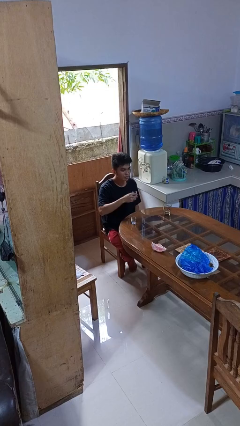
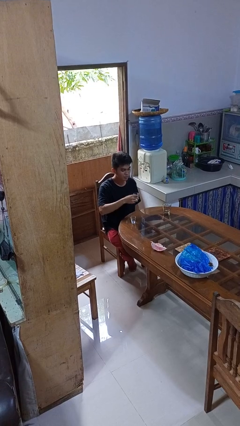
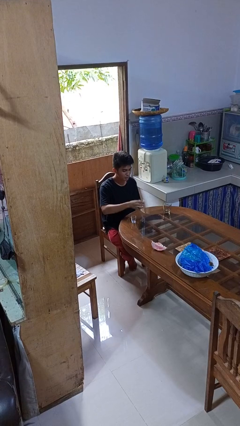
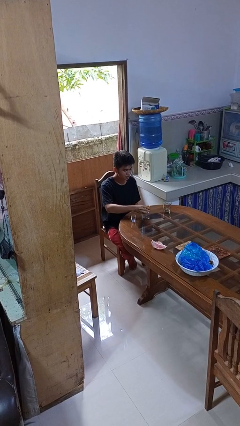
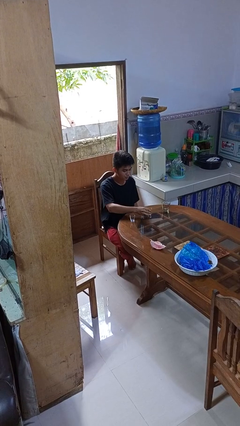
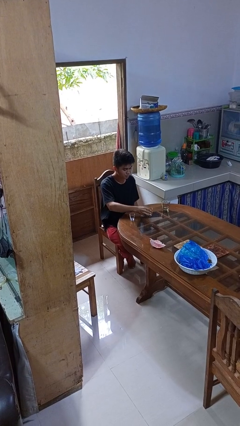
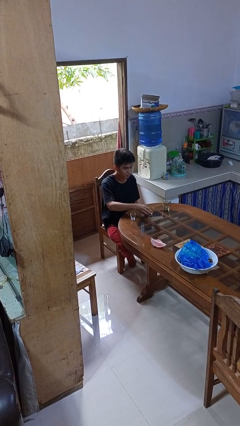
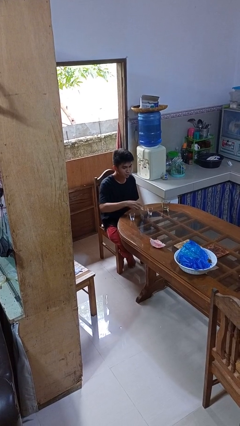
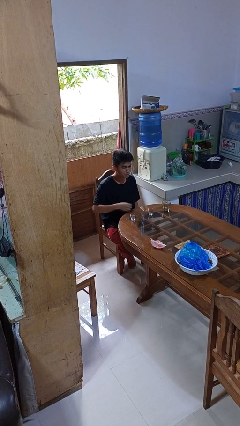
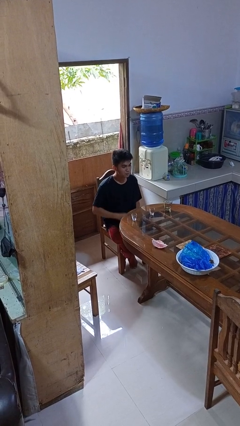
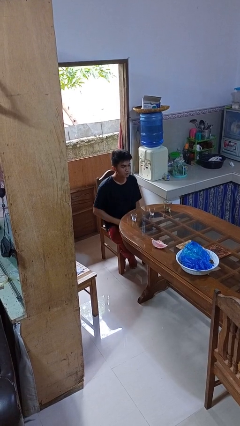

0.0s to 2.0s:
person puts down object on table

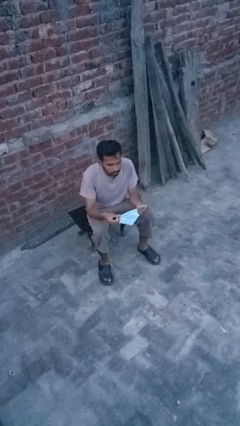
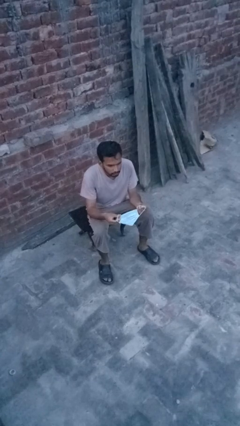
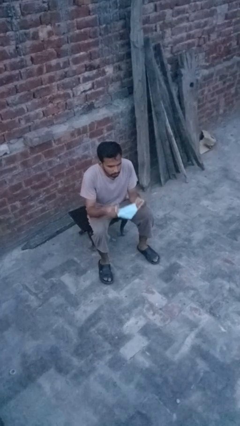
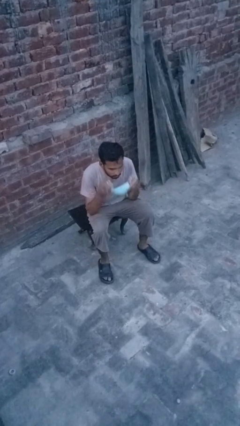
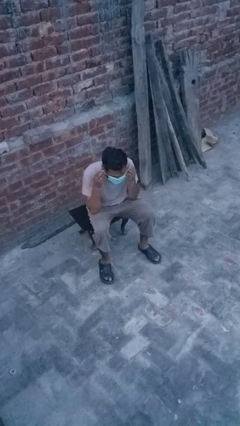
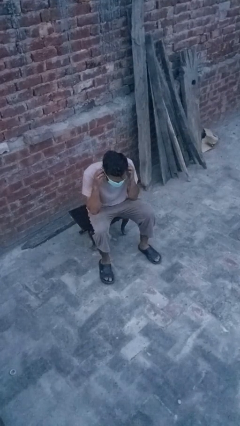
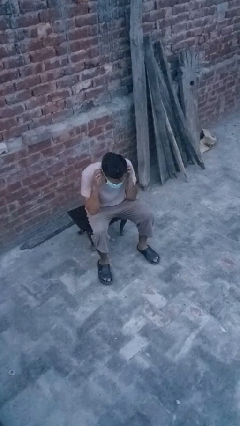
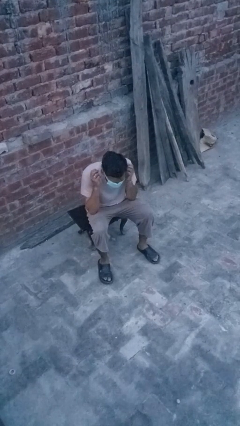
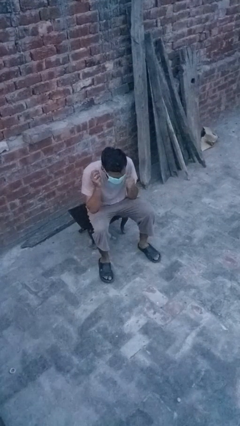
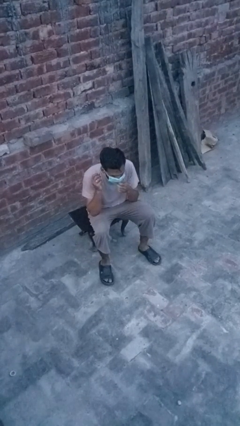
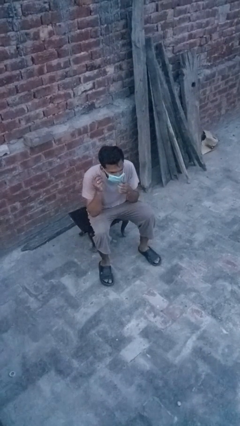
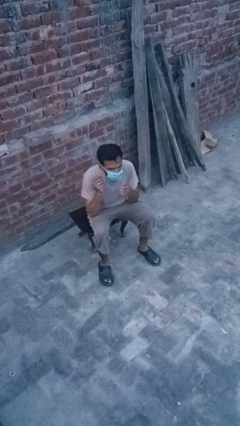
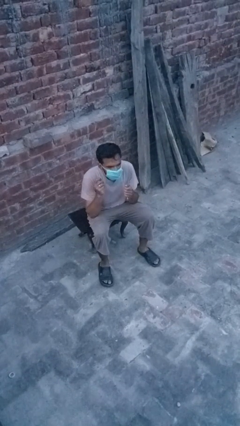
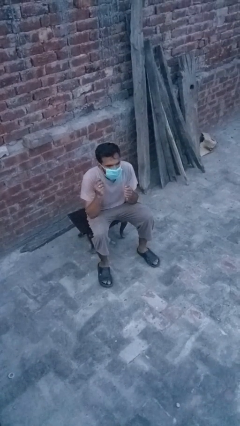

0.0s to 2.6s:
person puts on facemask

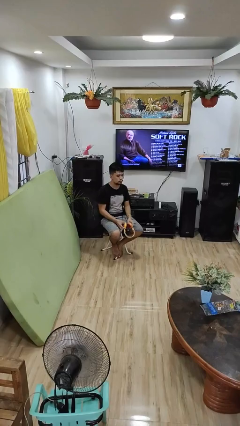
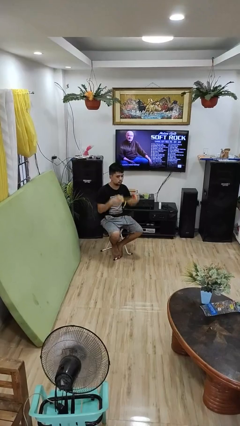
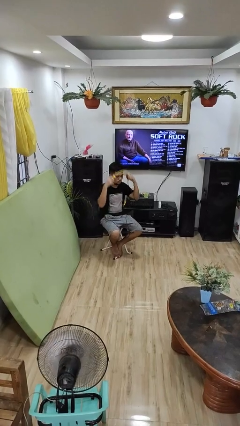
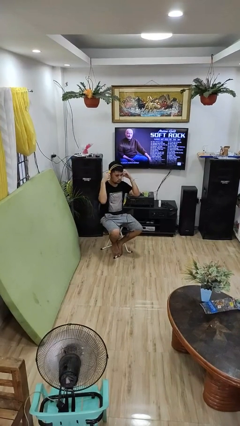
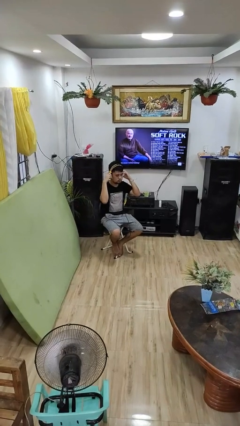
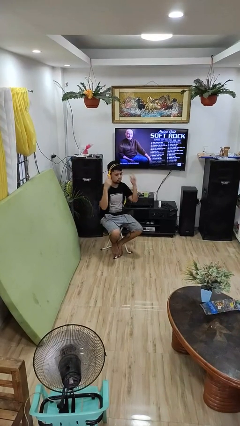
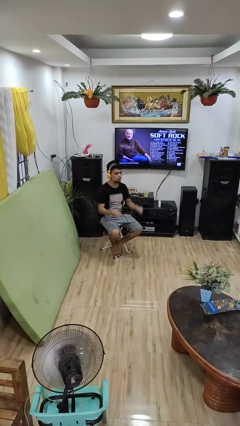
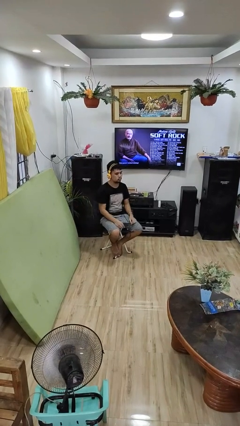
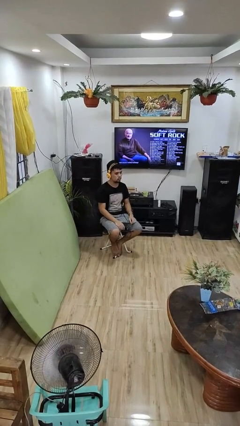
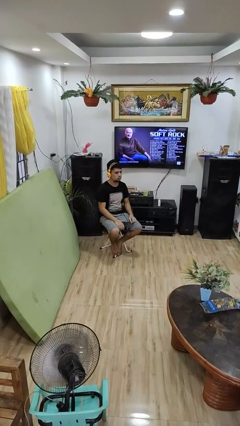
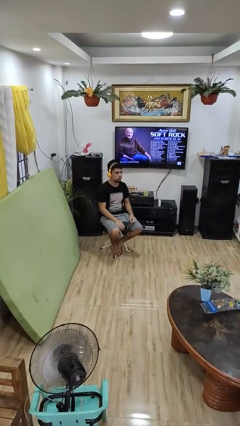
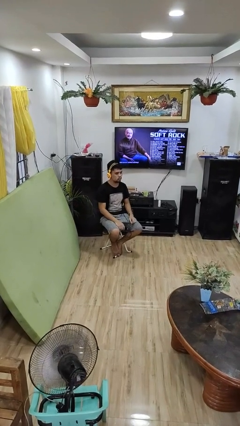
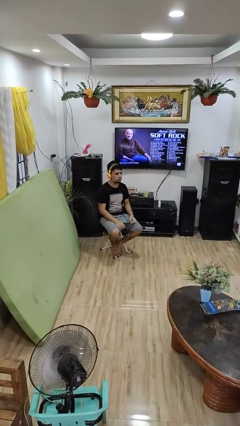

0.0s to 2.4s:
person puts on headphones

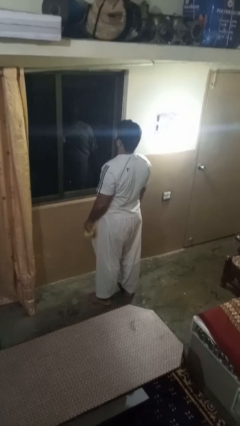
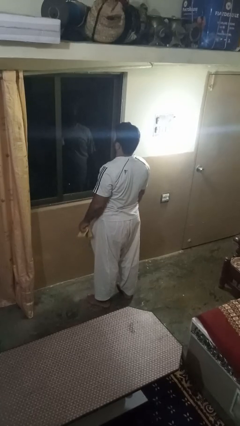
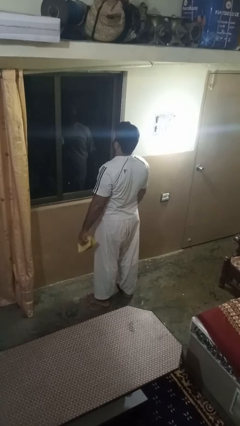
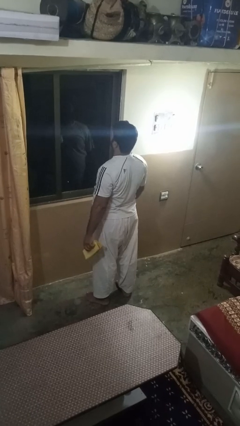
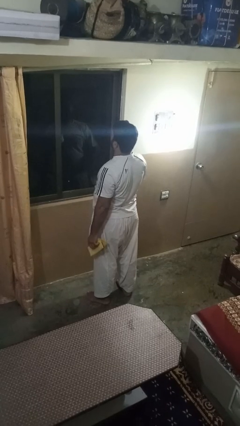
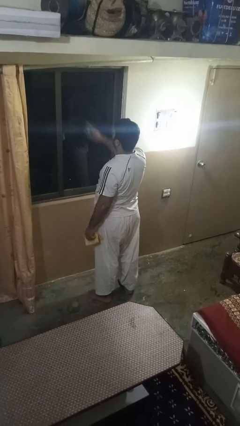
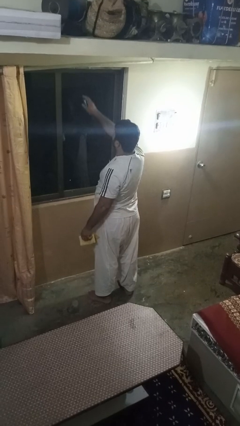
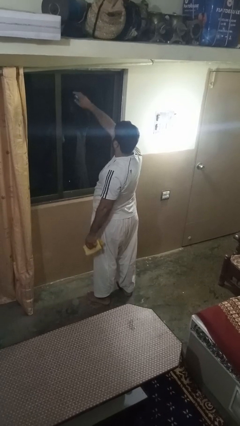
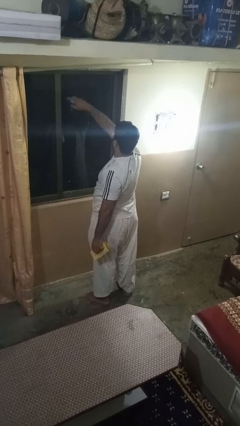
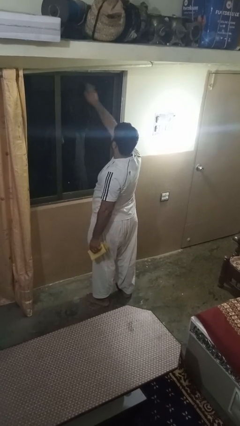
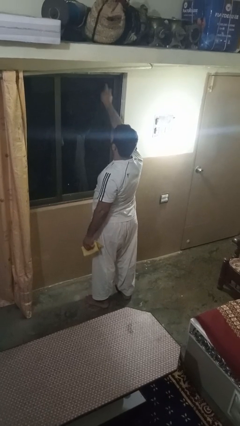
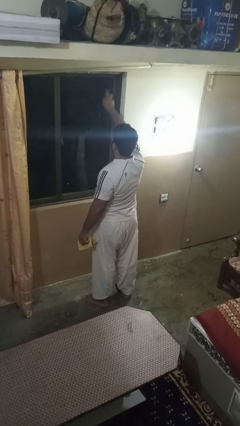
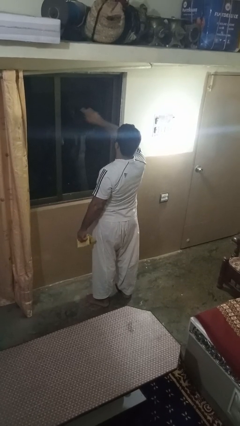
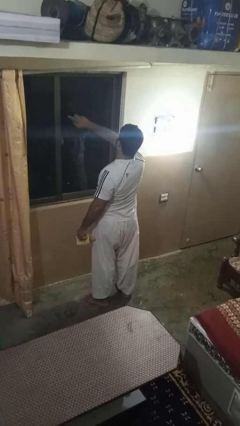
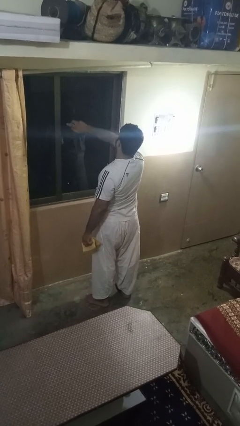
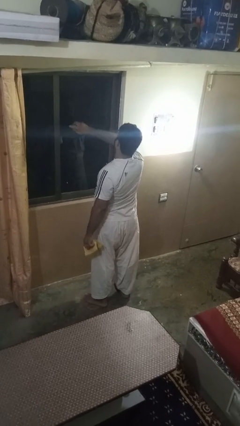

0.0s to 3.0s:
person sprays from bottle

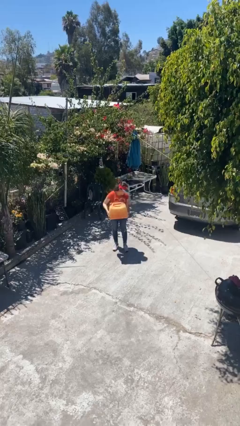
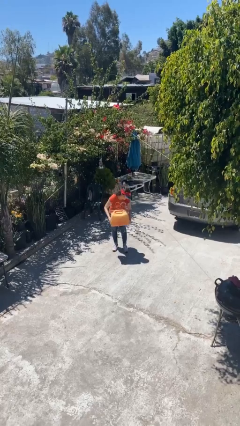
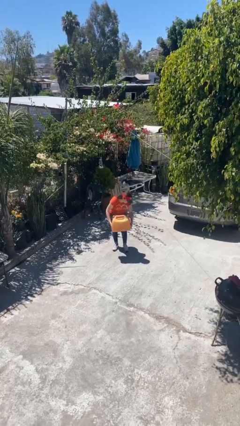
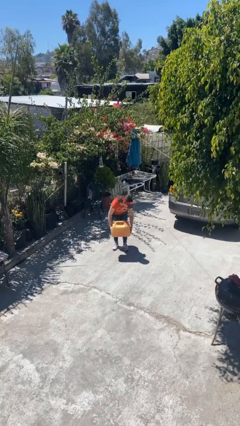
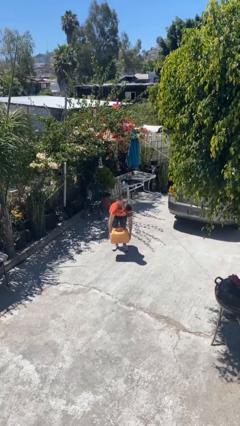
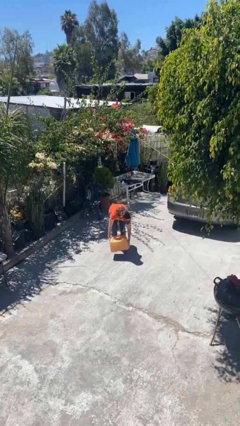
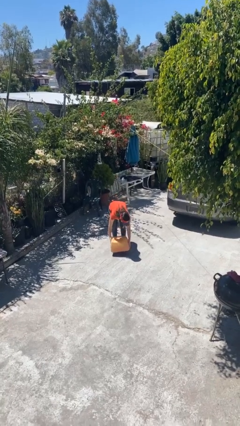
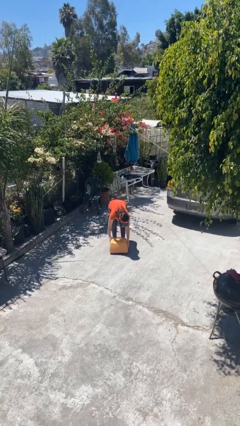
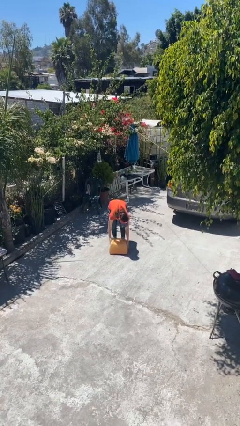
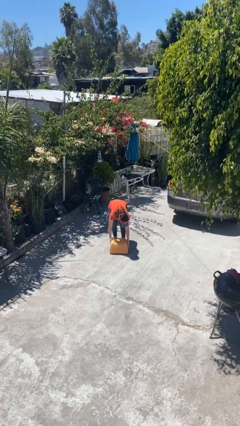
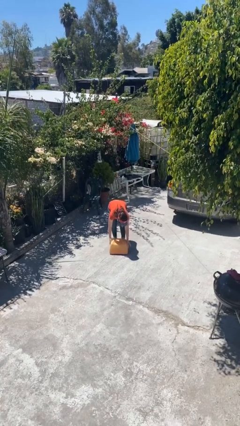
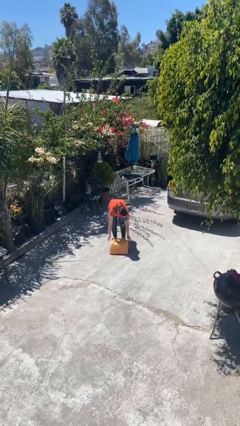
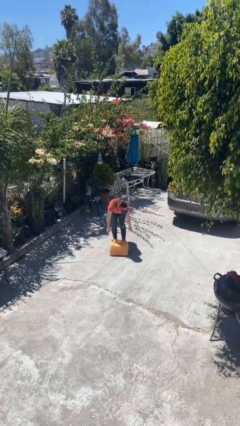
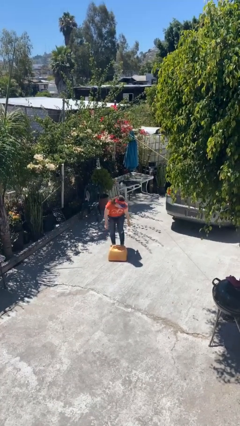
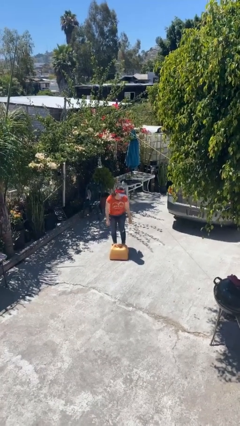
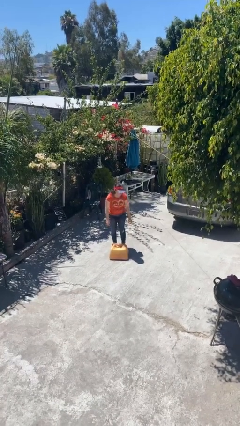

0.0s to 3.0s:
person puts down object on floor

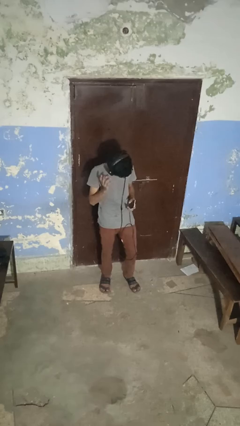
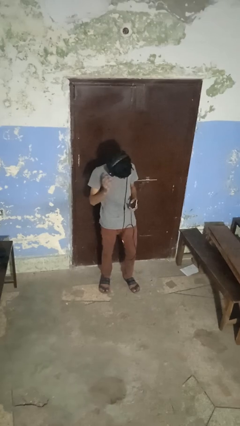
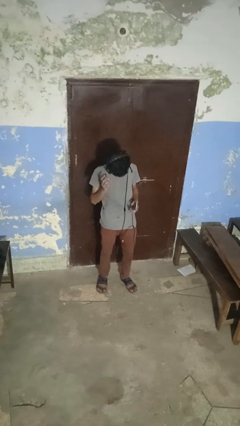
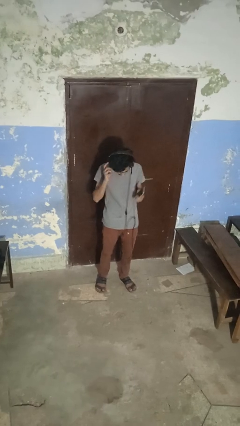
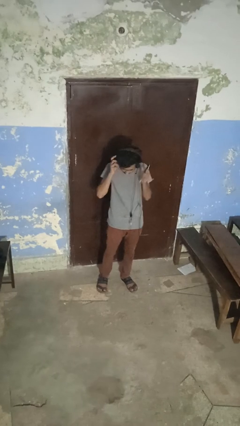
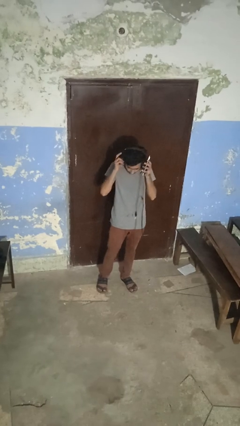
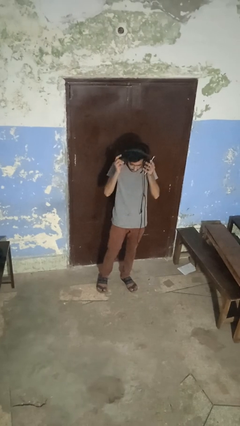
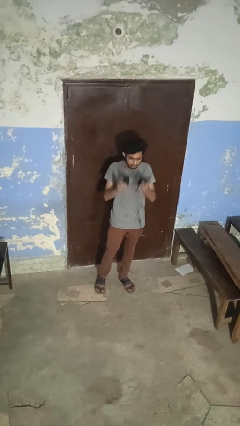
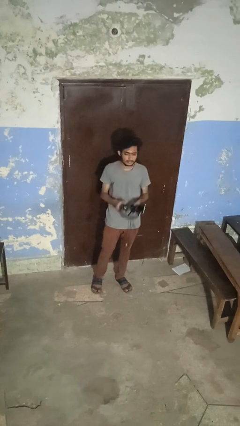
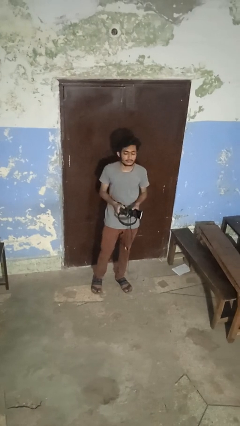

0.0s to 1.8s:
person takes off headphones

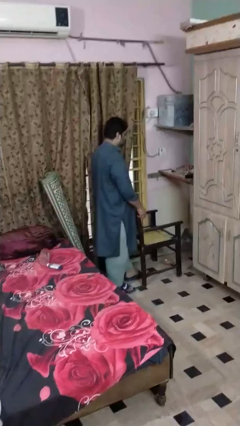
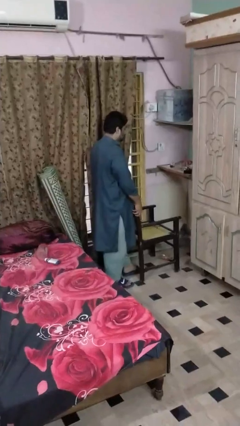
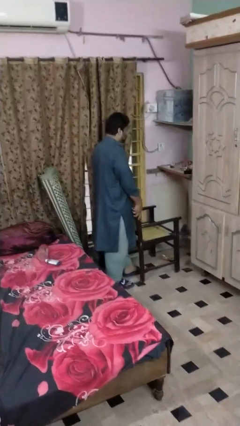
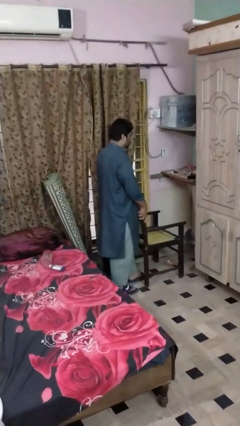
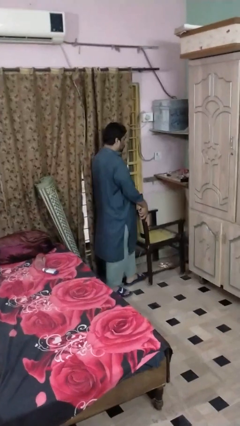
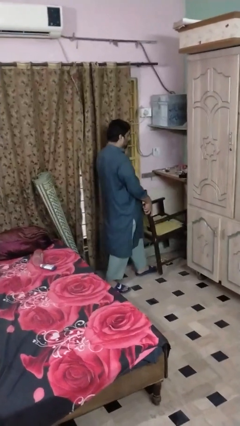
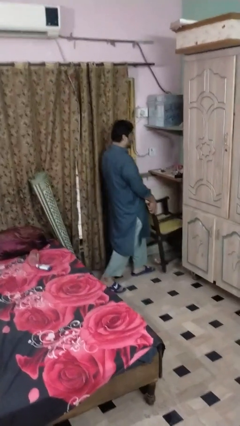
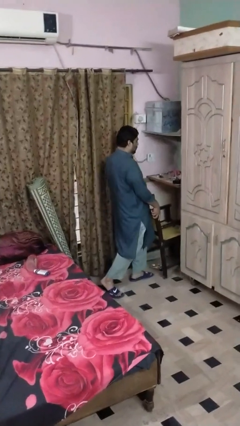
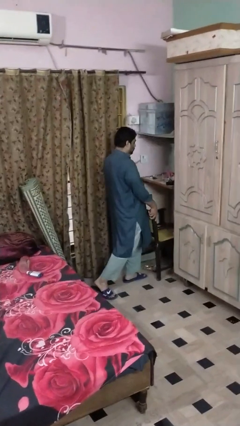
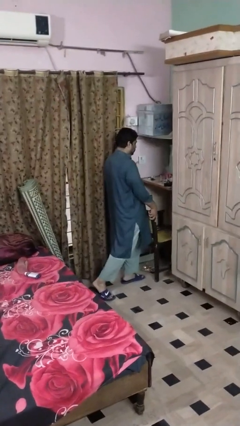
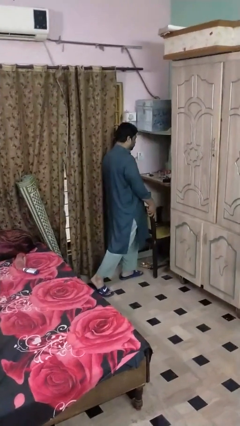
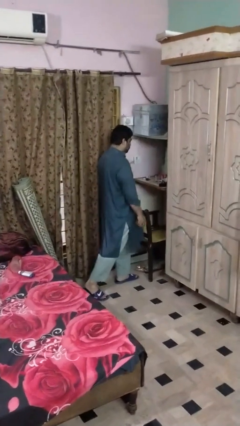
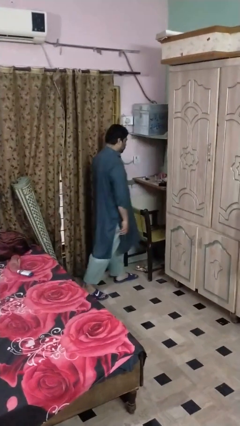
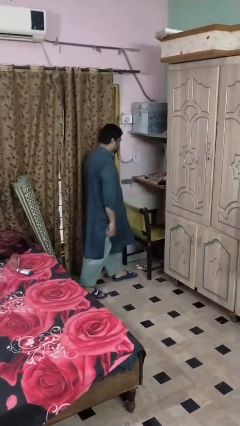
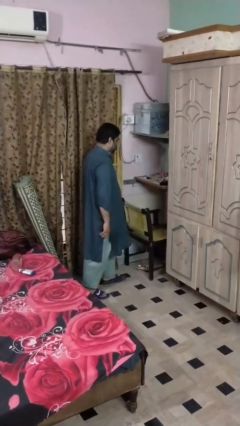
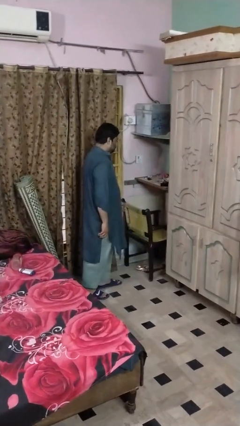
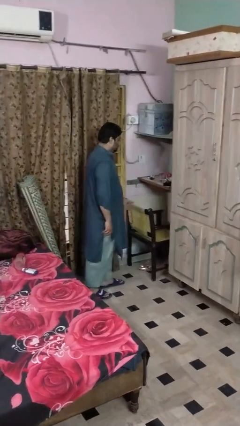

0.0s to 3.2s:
person pushes in chair
